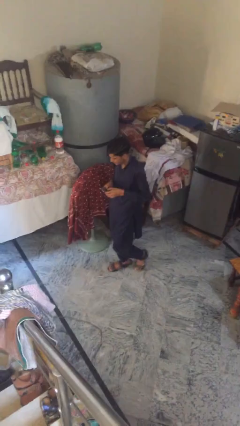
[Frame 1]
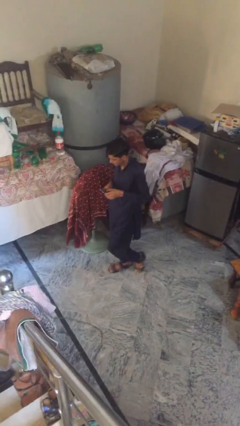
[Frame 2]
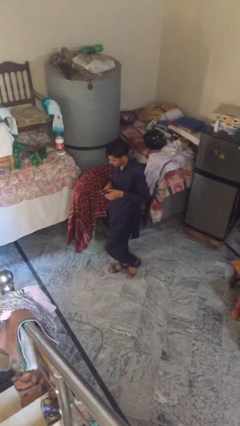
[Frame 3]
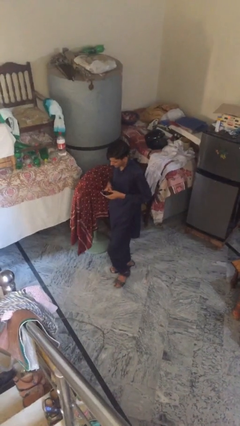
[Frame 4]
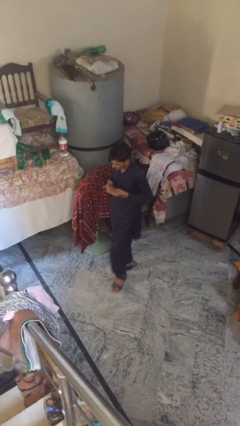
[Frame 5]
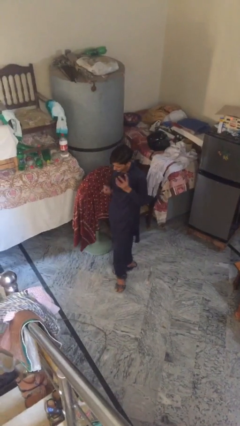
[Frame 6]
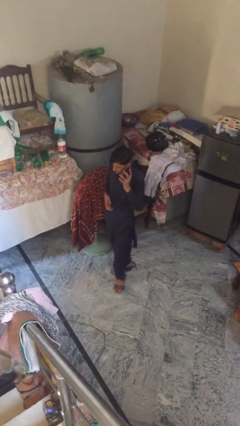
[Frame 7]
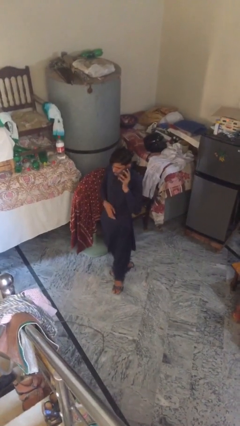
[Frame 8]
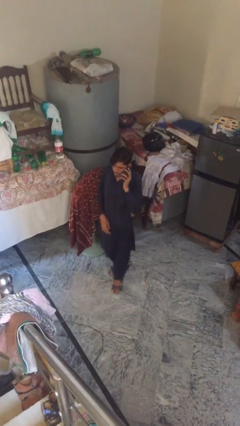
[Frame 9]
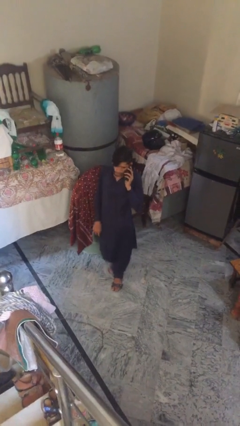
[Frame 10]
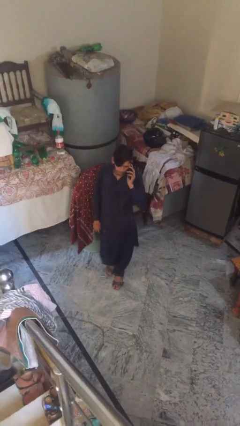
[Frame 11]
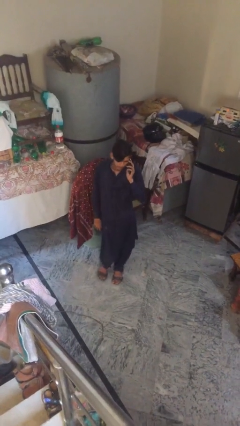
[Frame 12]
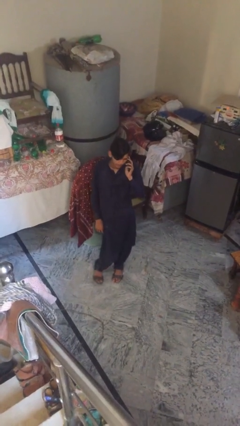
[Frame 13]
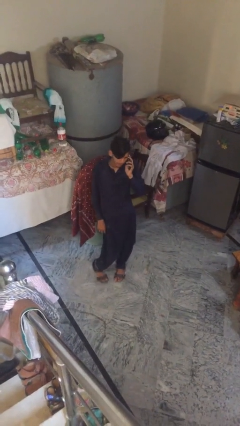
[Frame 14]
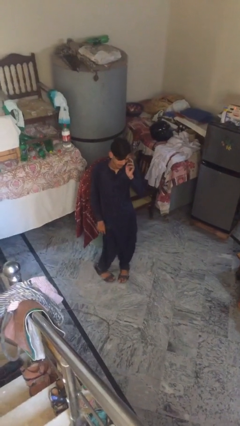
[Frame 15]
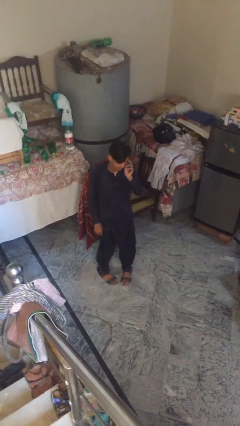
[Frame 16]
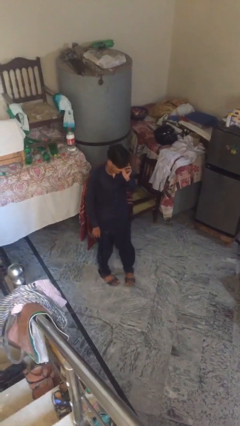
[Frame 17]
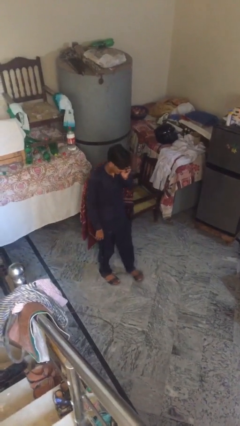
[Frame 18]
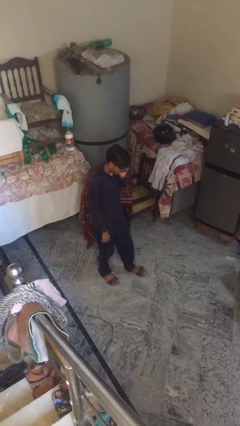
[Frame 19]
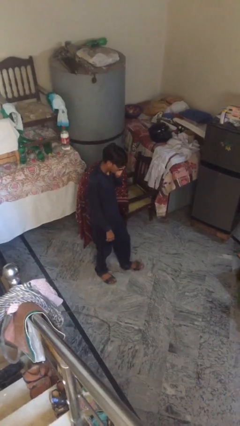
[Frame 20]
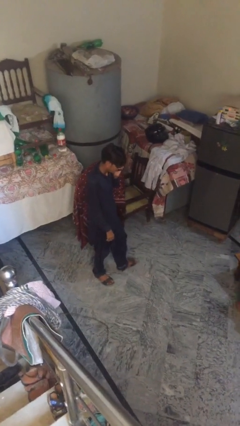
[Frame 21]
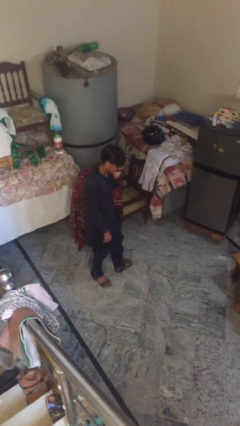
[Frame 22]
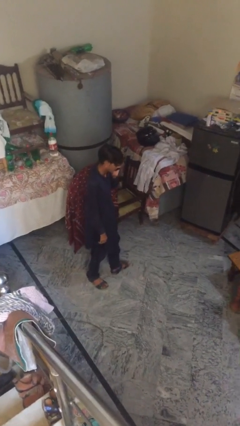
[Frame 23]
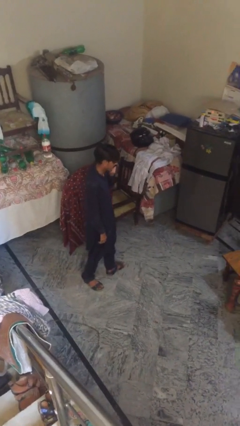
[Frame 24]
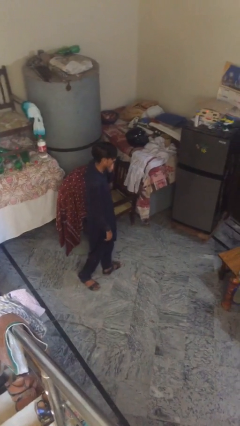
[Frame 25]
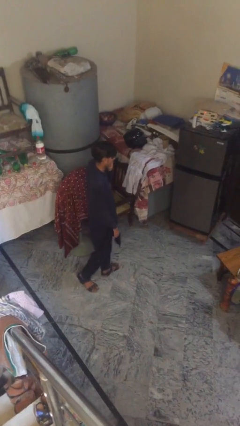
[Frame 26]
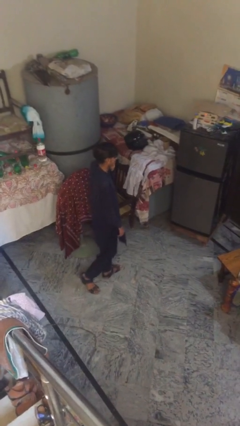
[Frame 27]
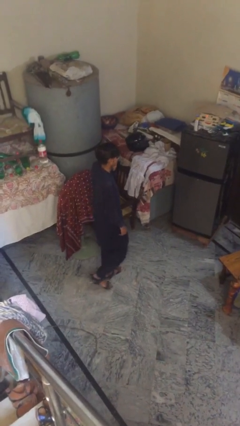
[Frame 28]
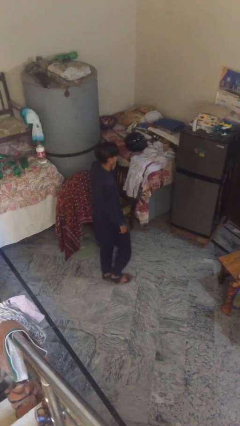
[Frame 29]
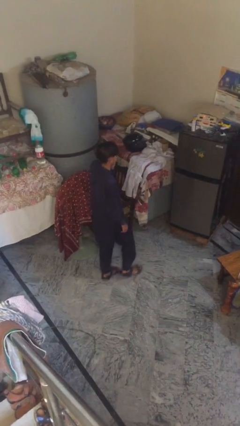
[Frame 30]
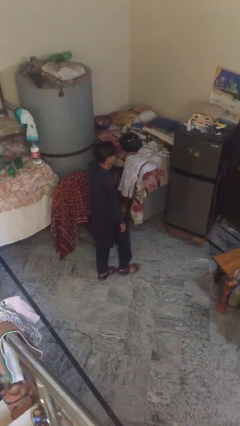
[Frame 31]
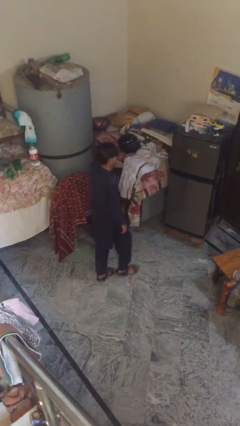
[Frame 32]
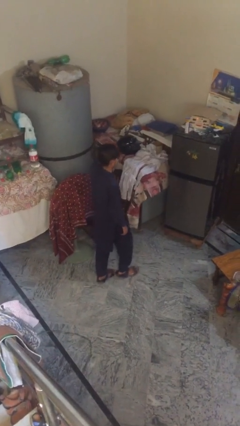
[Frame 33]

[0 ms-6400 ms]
person talks on phone

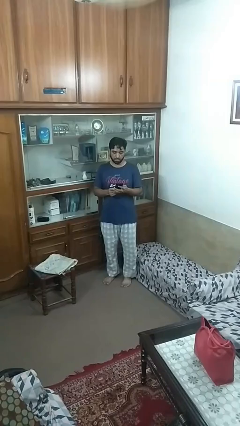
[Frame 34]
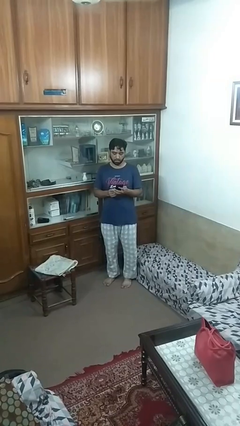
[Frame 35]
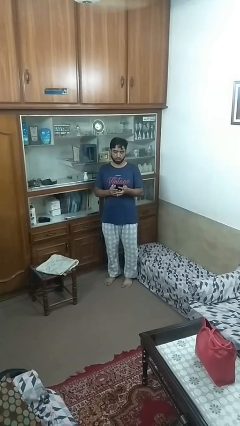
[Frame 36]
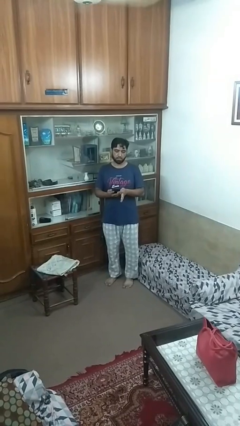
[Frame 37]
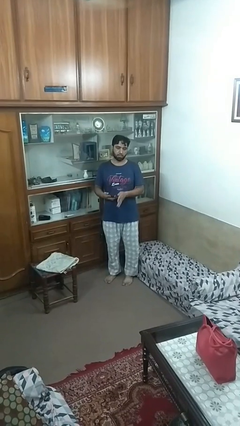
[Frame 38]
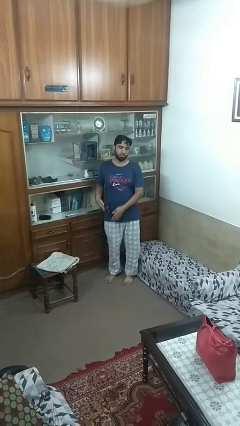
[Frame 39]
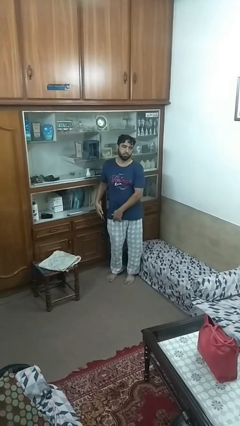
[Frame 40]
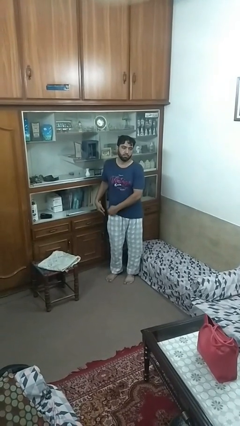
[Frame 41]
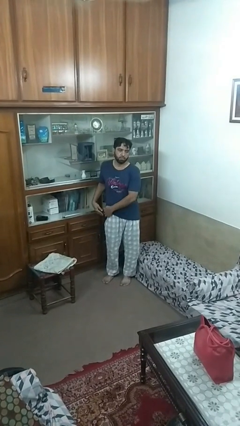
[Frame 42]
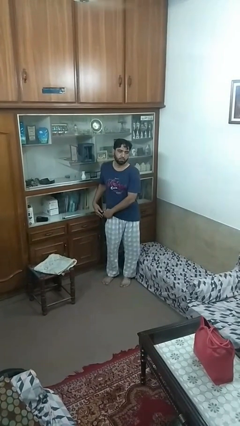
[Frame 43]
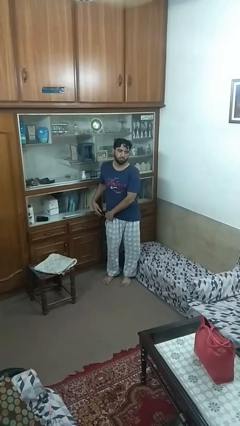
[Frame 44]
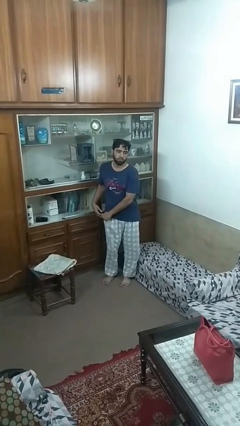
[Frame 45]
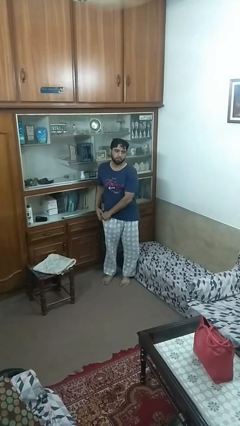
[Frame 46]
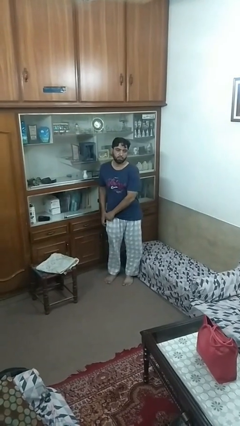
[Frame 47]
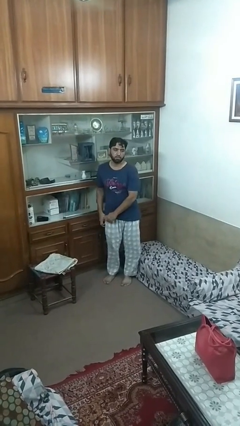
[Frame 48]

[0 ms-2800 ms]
person puts phone into pocket

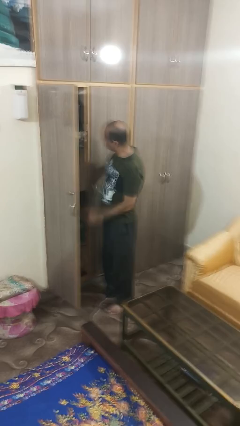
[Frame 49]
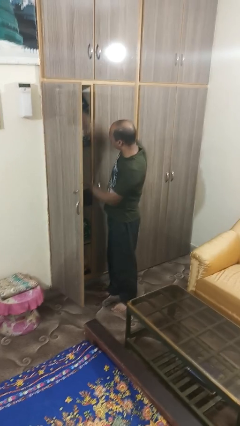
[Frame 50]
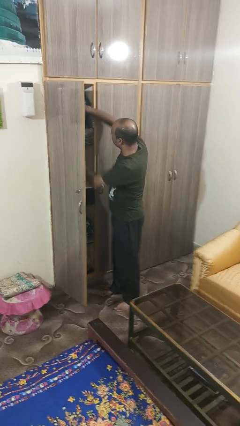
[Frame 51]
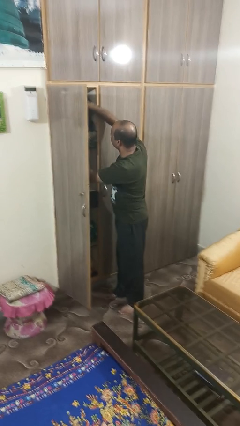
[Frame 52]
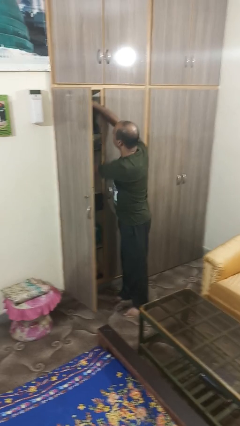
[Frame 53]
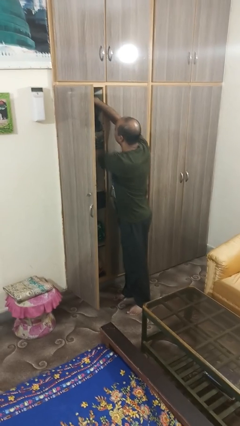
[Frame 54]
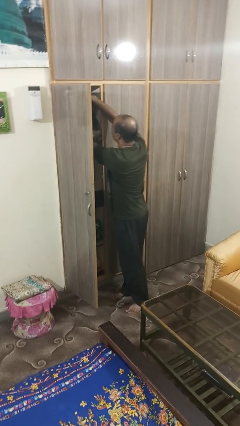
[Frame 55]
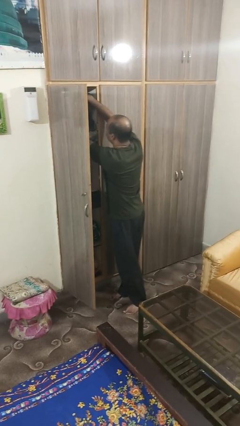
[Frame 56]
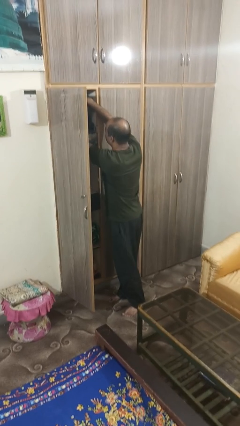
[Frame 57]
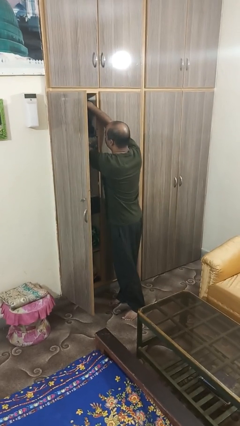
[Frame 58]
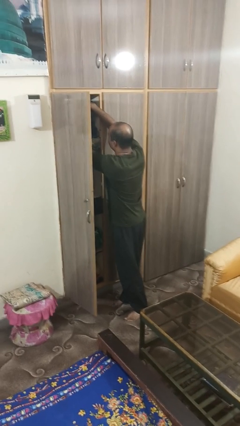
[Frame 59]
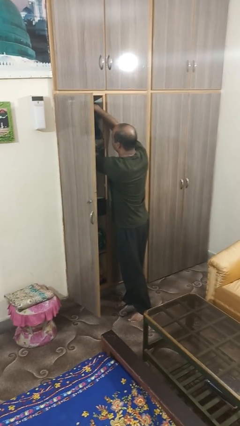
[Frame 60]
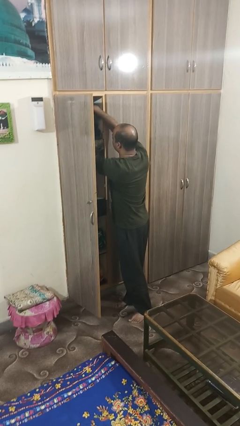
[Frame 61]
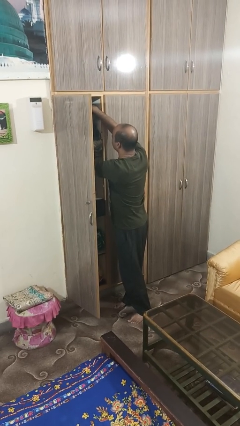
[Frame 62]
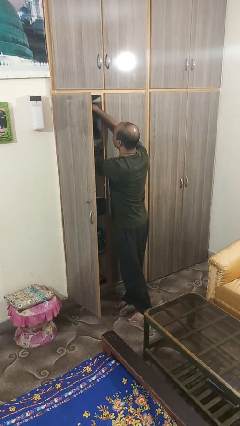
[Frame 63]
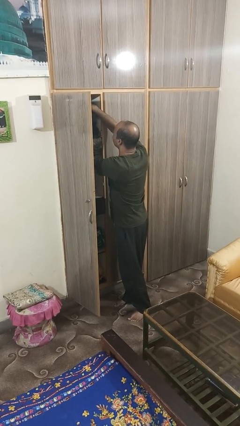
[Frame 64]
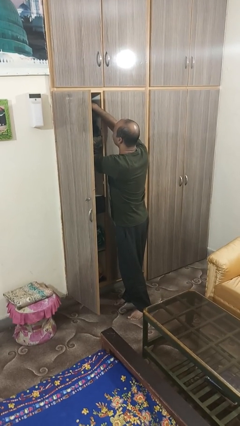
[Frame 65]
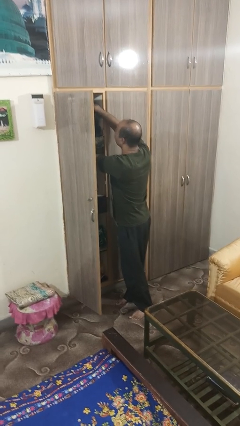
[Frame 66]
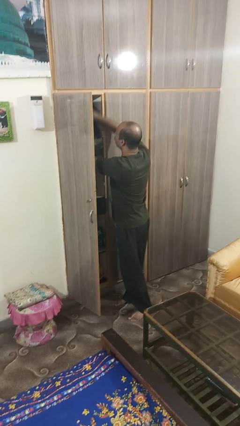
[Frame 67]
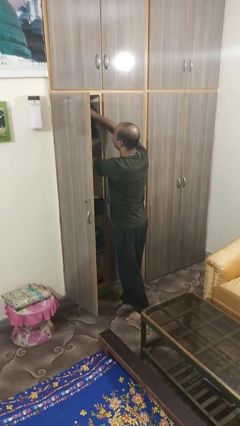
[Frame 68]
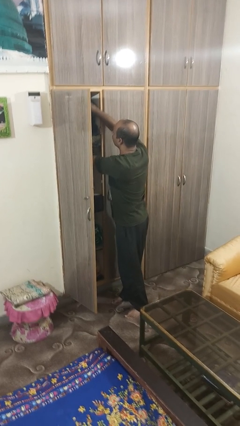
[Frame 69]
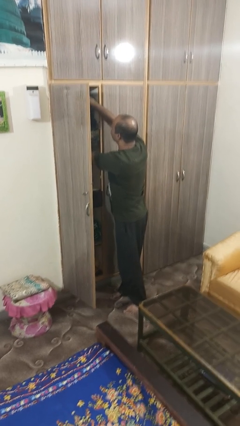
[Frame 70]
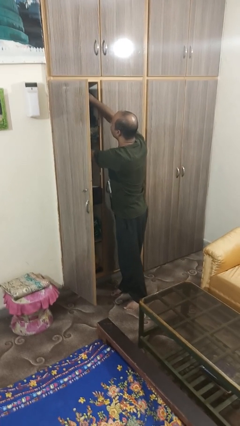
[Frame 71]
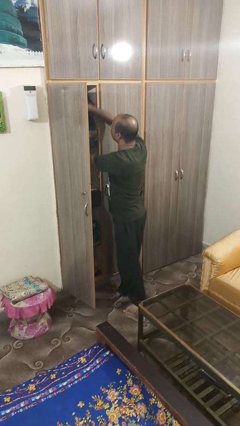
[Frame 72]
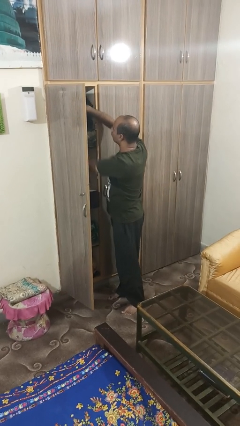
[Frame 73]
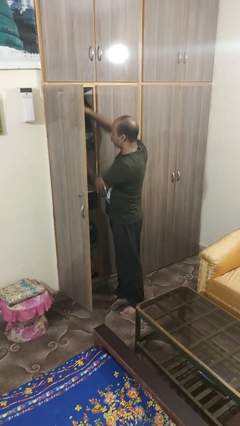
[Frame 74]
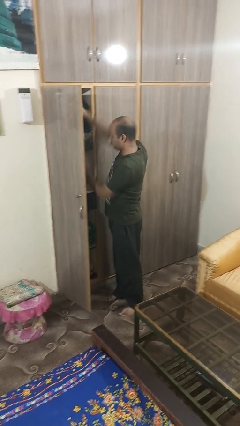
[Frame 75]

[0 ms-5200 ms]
person searches in cabinet

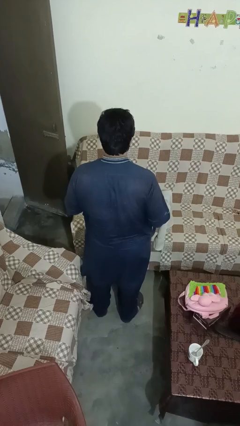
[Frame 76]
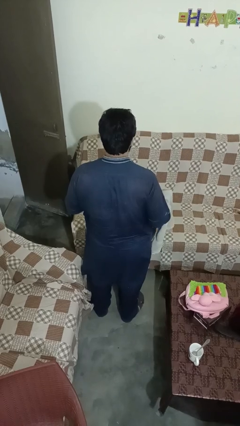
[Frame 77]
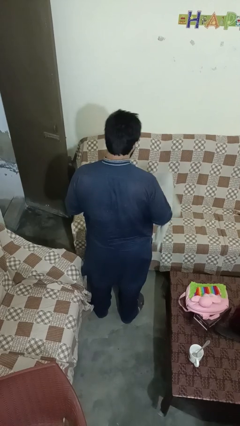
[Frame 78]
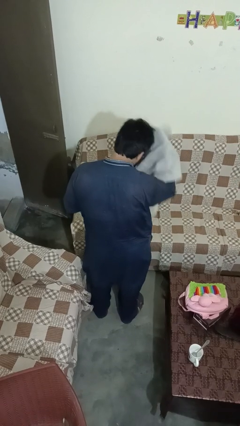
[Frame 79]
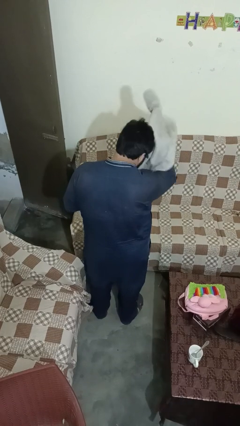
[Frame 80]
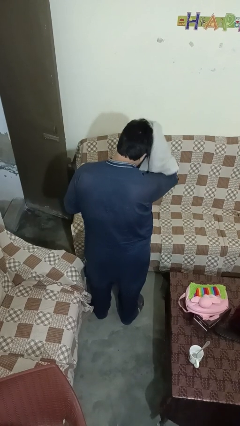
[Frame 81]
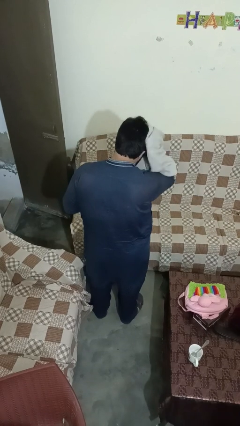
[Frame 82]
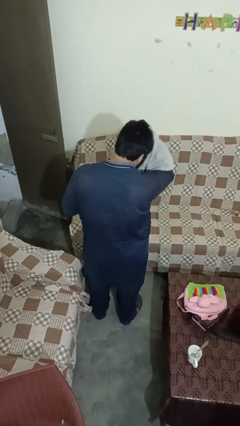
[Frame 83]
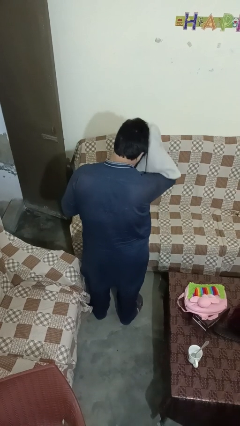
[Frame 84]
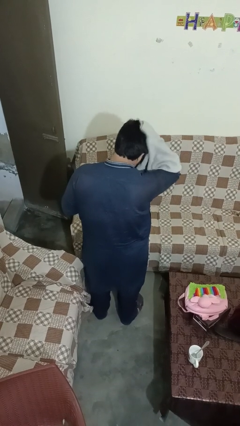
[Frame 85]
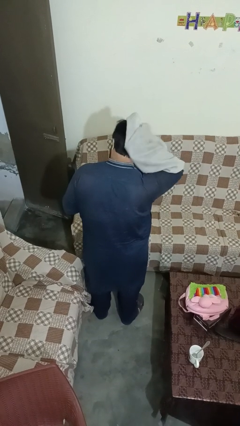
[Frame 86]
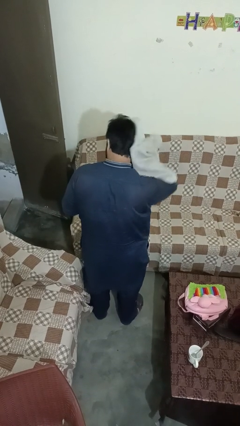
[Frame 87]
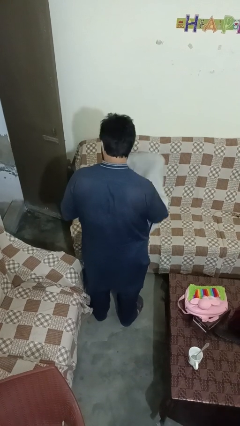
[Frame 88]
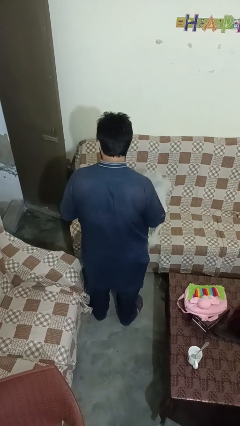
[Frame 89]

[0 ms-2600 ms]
person dries hair with towel

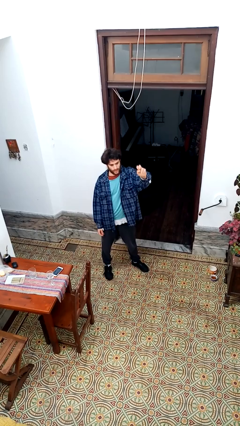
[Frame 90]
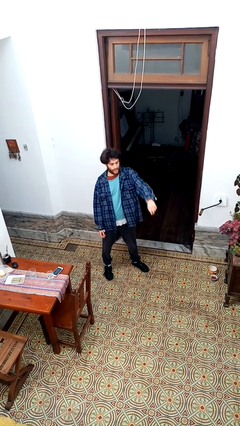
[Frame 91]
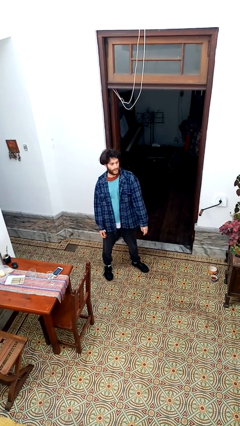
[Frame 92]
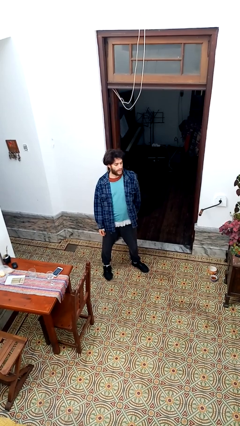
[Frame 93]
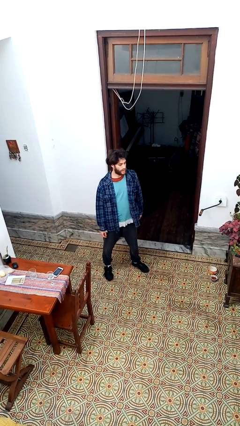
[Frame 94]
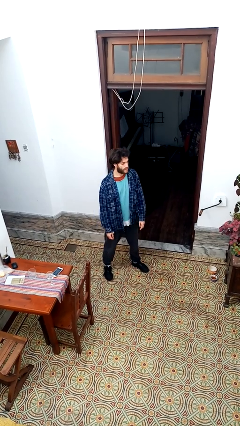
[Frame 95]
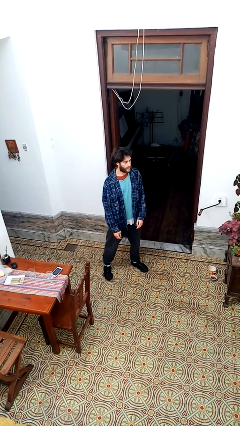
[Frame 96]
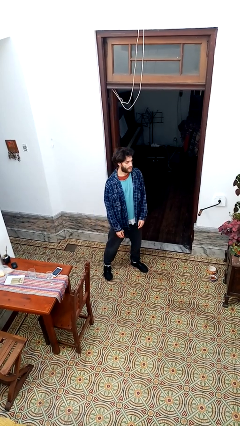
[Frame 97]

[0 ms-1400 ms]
person gestures lower hand
